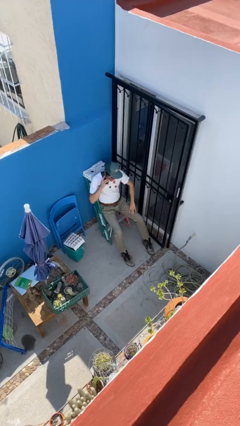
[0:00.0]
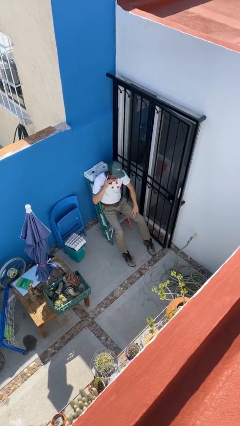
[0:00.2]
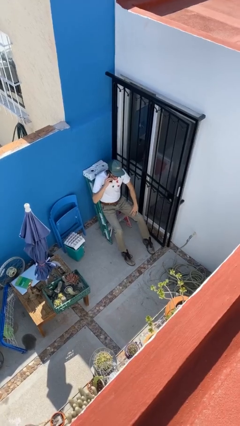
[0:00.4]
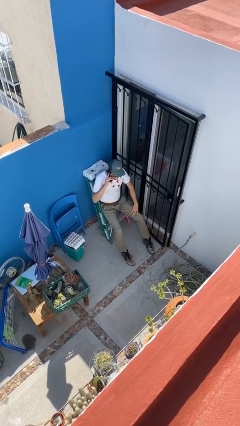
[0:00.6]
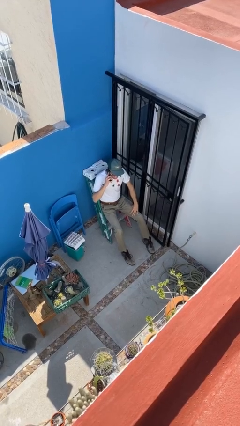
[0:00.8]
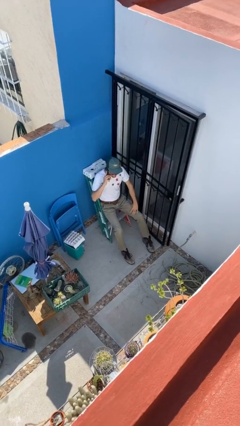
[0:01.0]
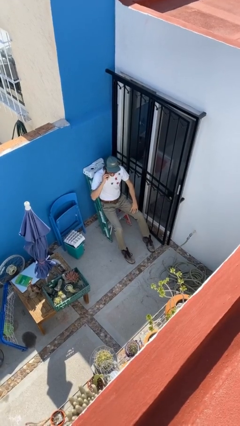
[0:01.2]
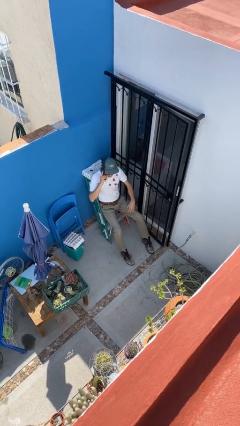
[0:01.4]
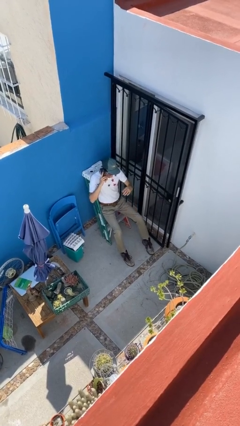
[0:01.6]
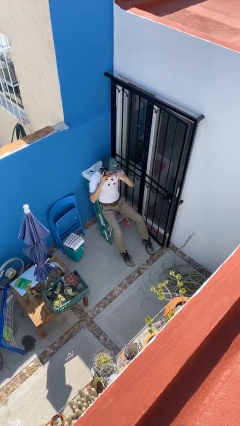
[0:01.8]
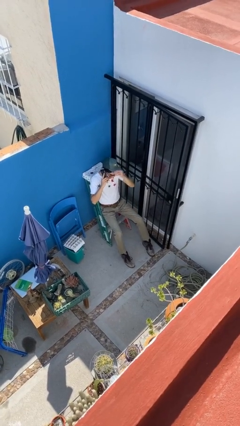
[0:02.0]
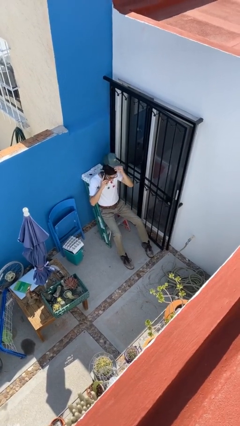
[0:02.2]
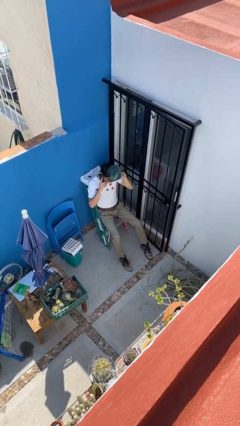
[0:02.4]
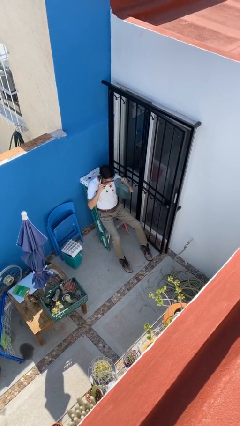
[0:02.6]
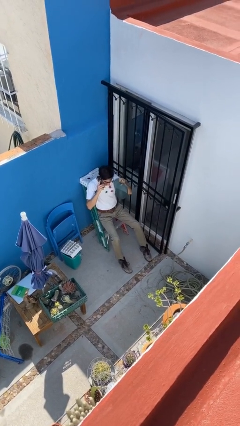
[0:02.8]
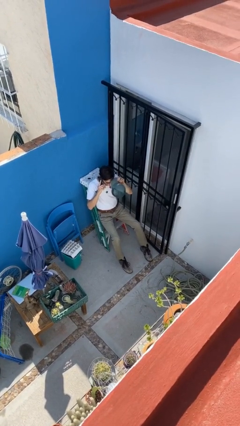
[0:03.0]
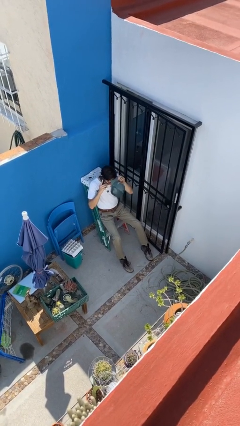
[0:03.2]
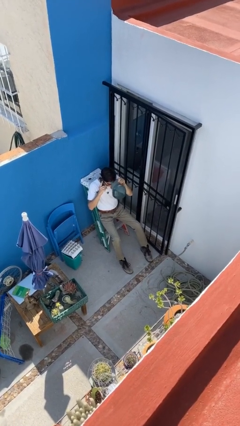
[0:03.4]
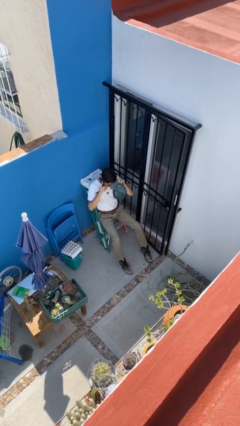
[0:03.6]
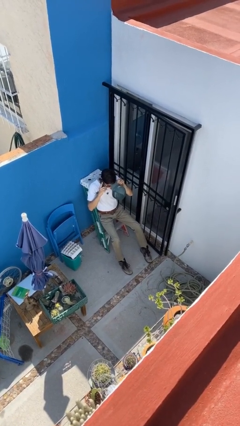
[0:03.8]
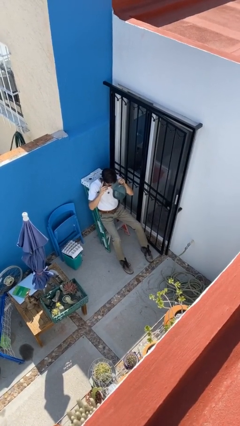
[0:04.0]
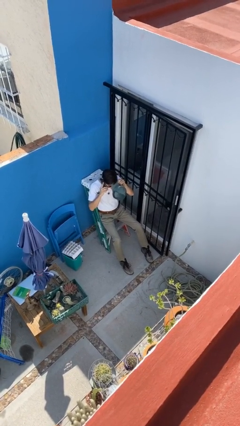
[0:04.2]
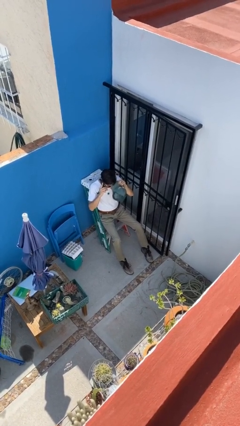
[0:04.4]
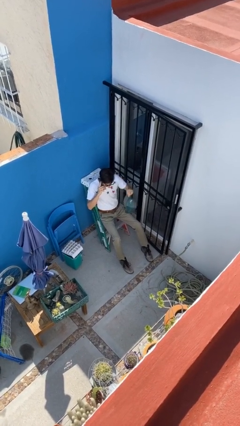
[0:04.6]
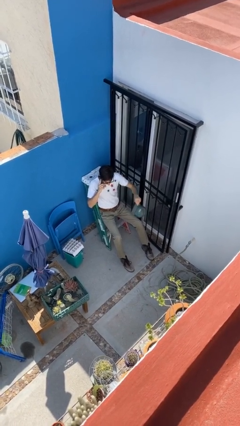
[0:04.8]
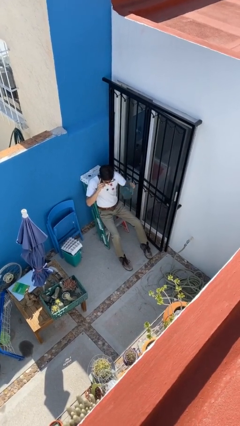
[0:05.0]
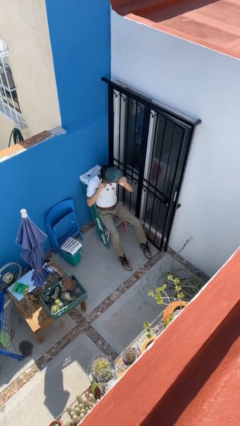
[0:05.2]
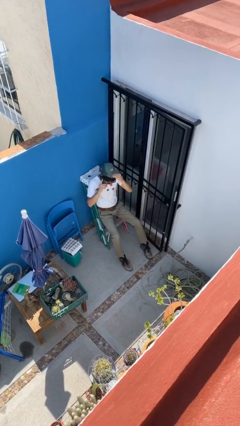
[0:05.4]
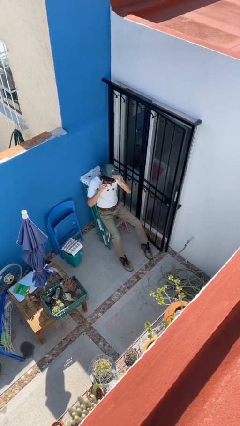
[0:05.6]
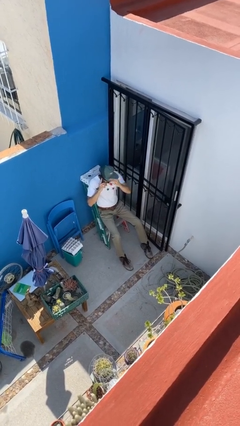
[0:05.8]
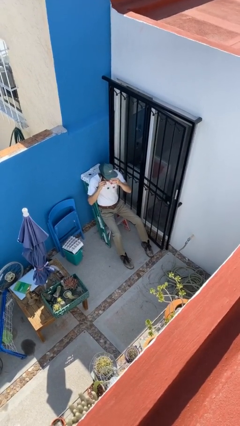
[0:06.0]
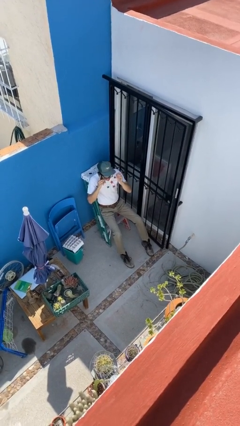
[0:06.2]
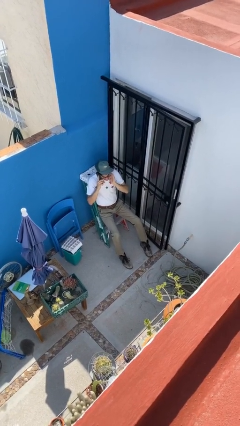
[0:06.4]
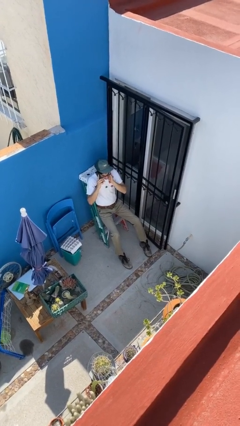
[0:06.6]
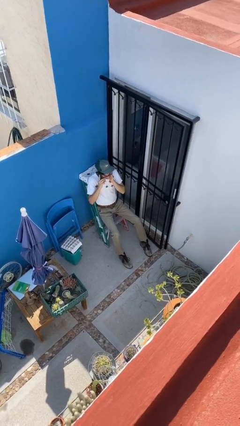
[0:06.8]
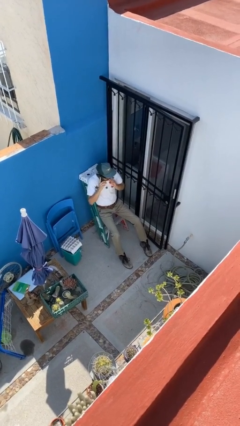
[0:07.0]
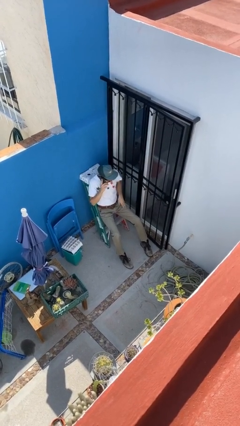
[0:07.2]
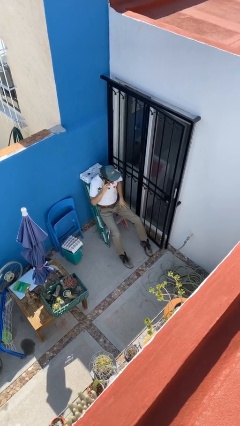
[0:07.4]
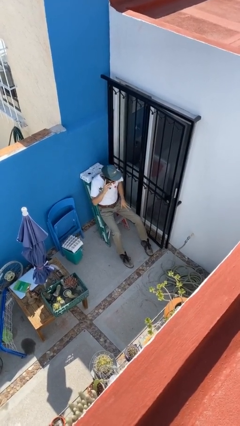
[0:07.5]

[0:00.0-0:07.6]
person talks on phone

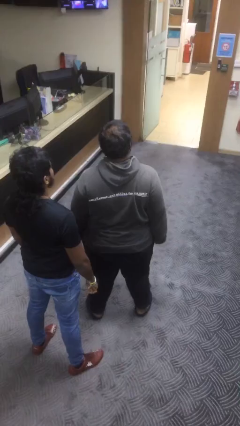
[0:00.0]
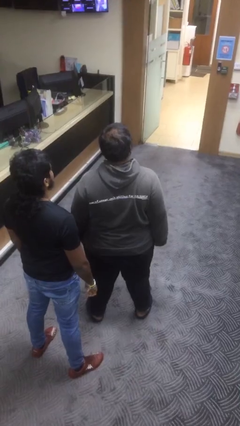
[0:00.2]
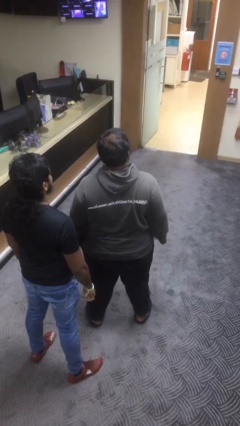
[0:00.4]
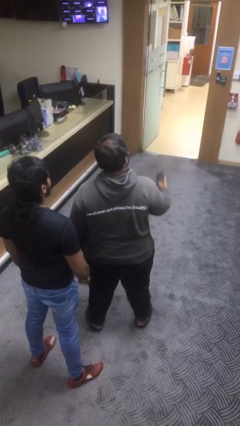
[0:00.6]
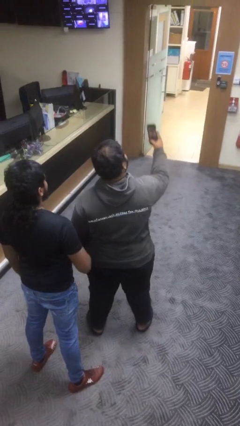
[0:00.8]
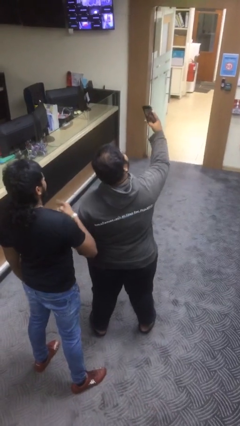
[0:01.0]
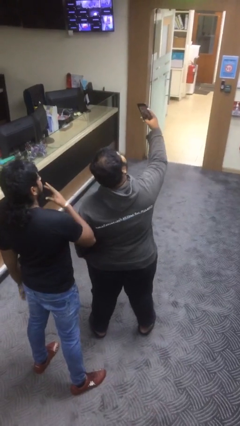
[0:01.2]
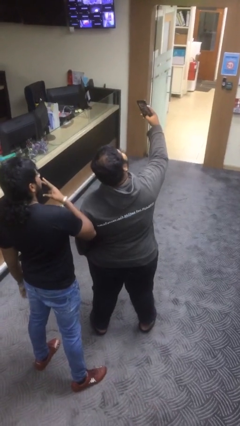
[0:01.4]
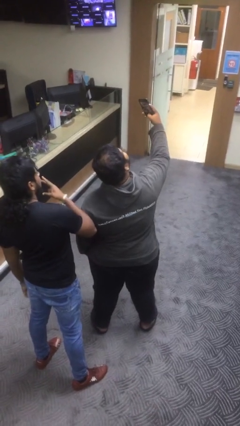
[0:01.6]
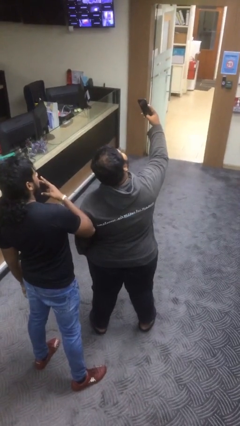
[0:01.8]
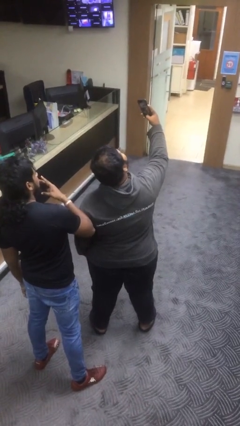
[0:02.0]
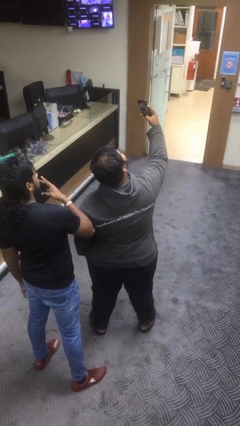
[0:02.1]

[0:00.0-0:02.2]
person takes selfie with person

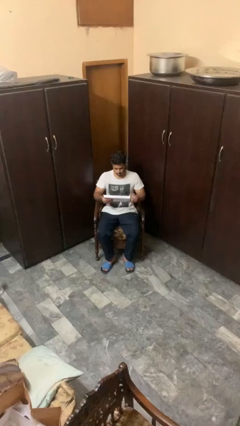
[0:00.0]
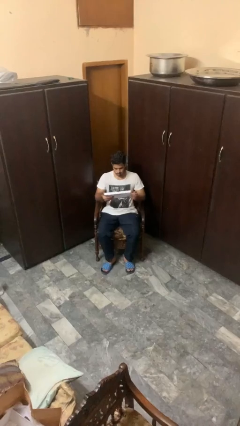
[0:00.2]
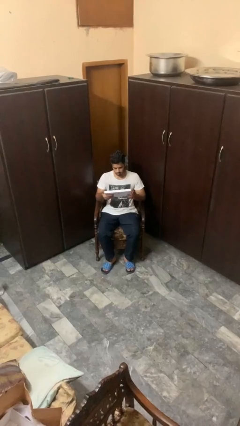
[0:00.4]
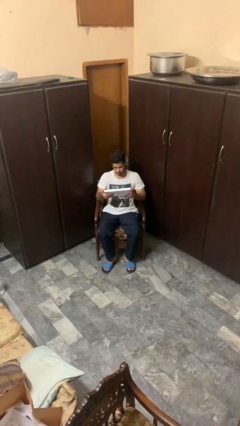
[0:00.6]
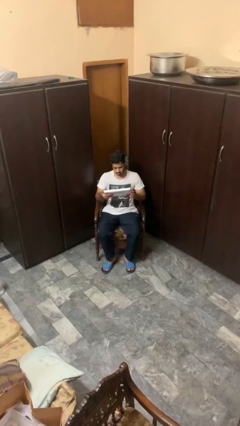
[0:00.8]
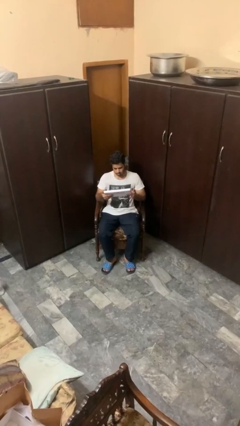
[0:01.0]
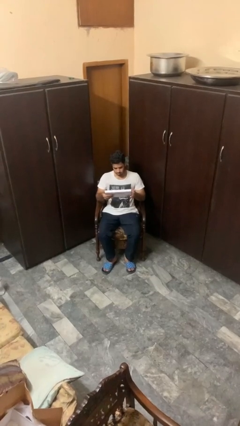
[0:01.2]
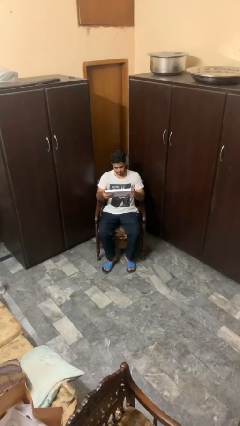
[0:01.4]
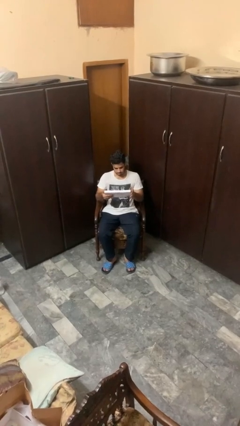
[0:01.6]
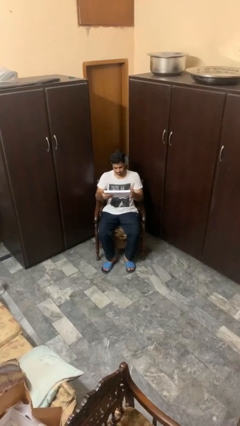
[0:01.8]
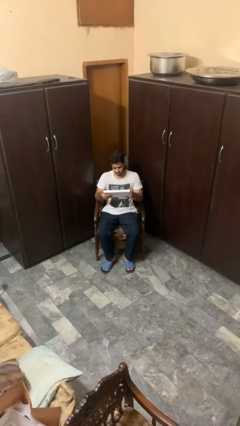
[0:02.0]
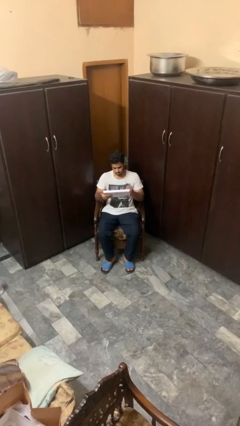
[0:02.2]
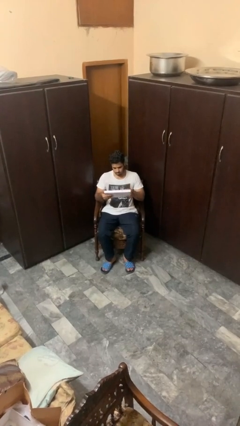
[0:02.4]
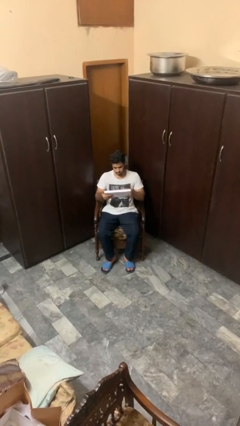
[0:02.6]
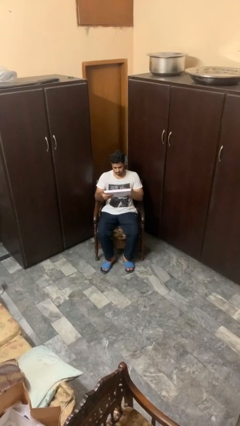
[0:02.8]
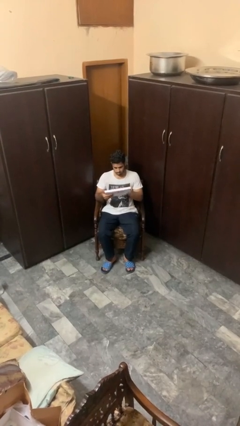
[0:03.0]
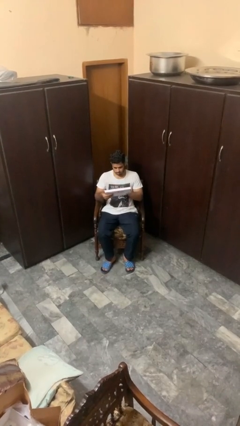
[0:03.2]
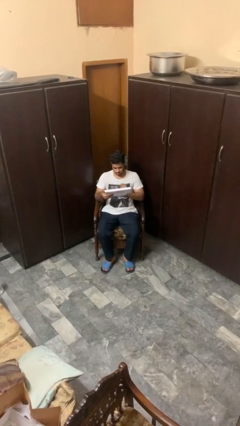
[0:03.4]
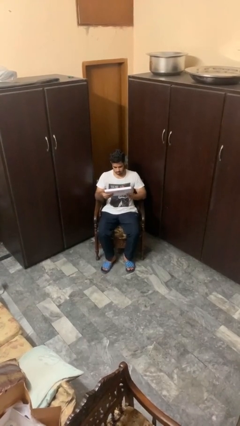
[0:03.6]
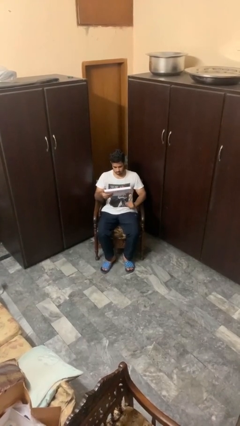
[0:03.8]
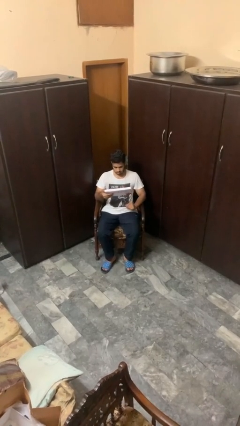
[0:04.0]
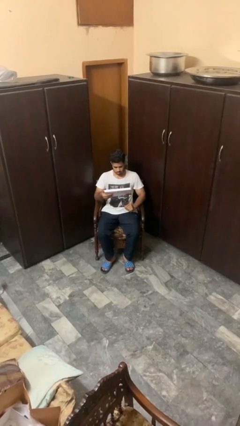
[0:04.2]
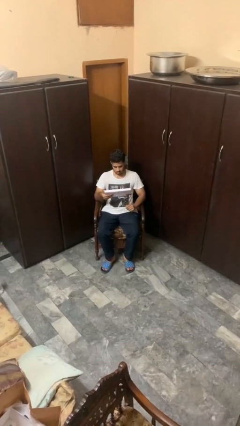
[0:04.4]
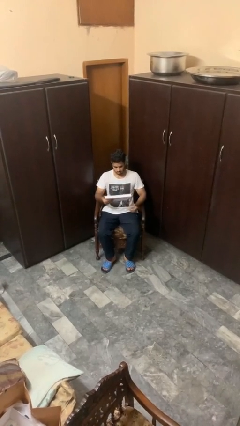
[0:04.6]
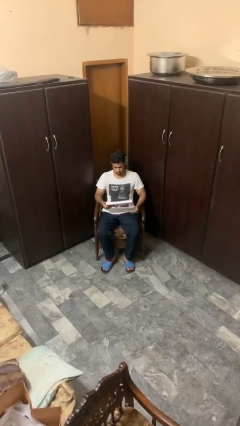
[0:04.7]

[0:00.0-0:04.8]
person interacts with tablet

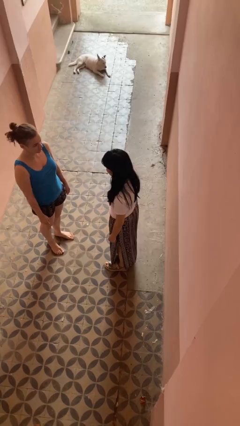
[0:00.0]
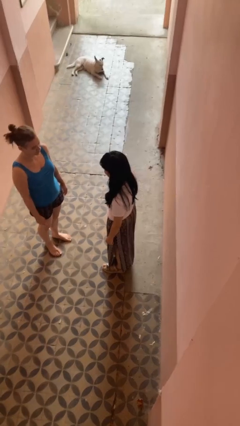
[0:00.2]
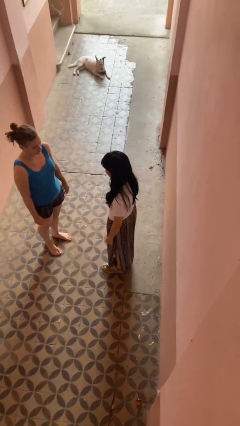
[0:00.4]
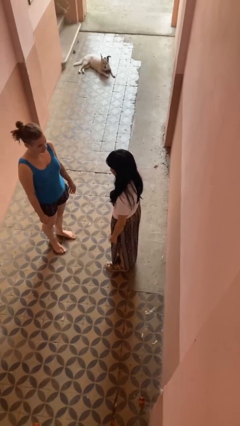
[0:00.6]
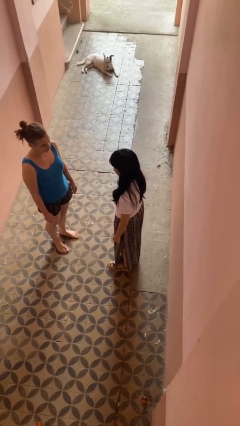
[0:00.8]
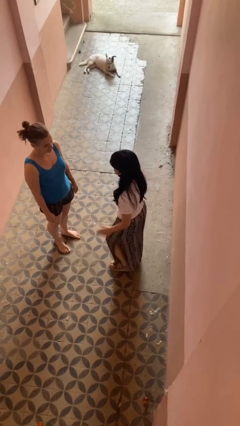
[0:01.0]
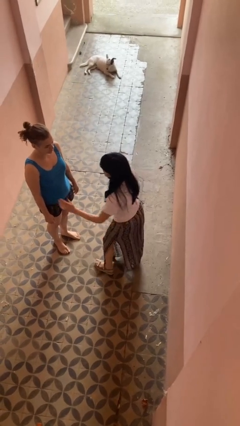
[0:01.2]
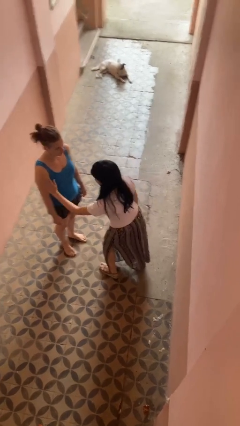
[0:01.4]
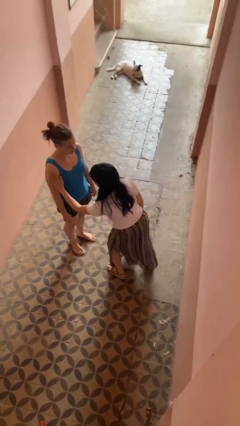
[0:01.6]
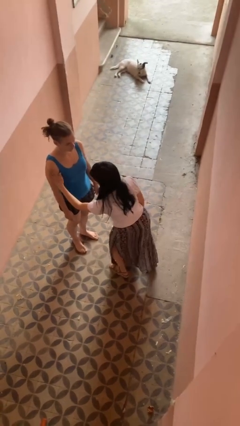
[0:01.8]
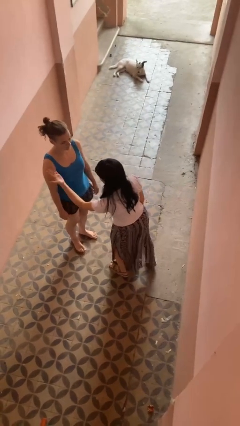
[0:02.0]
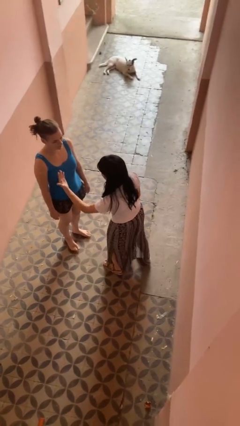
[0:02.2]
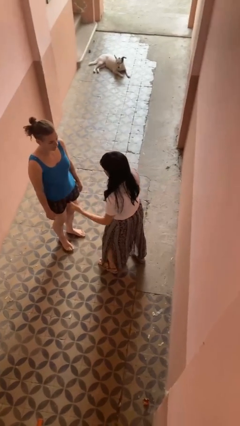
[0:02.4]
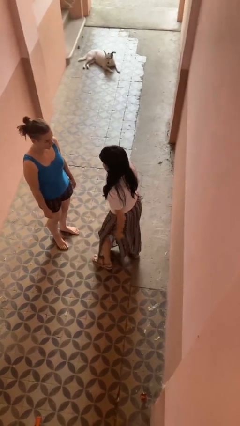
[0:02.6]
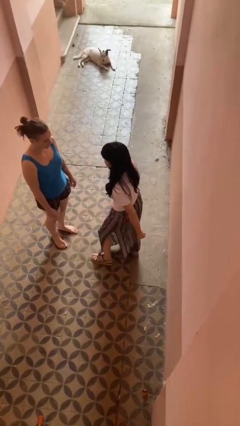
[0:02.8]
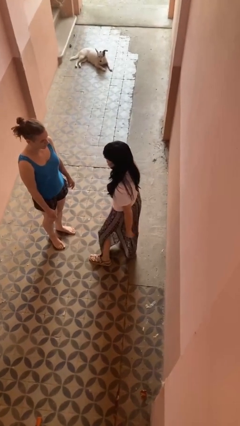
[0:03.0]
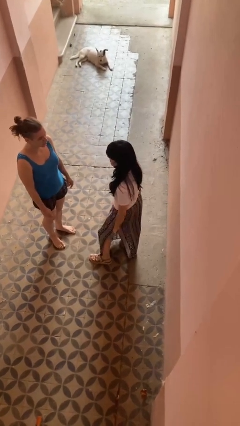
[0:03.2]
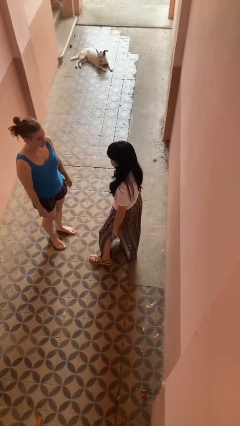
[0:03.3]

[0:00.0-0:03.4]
person shoves person
